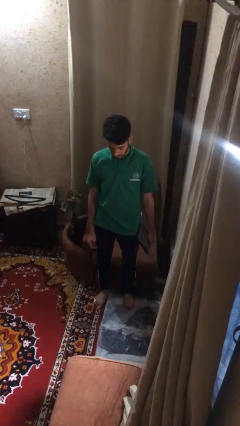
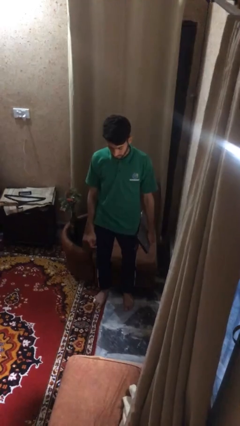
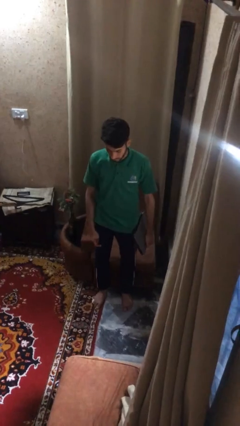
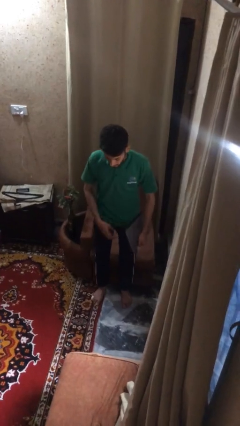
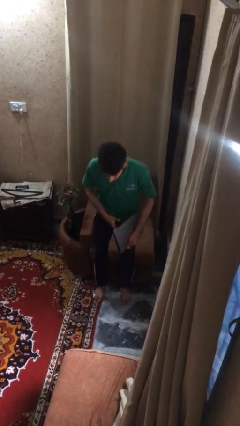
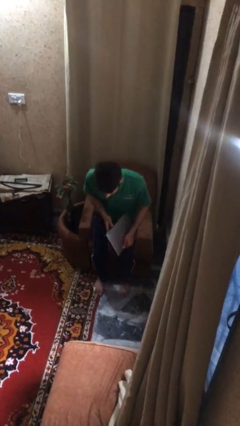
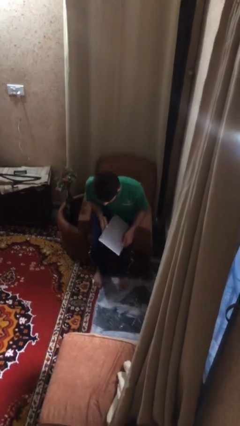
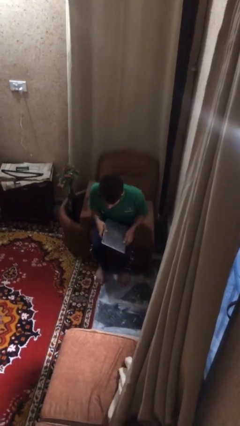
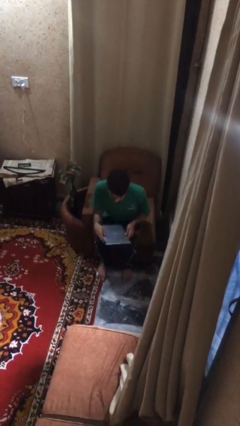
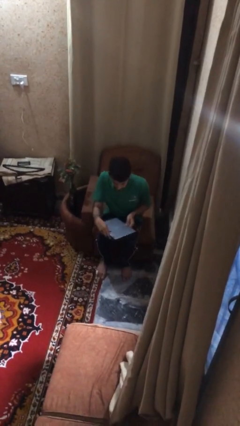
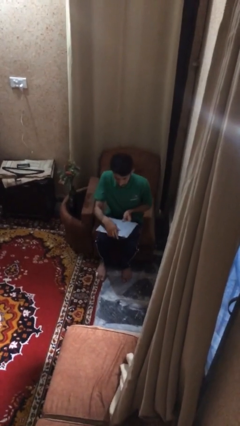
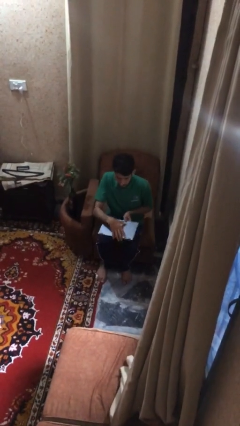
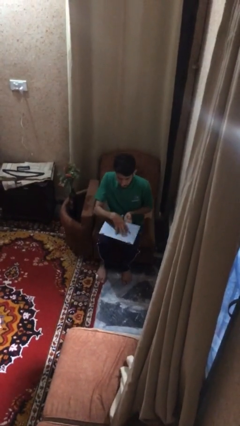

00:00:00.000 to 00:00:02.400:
person sits down

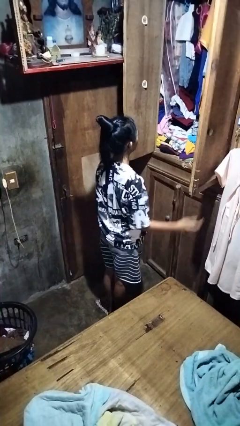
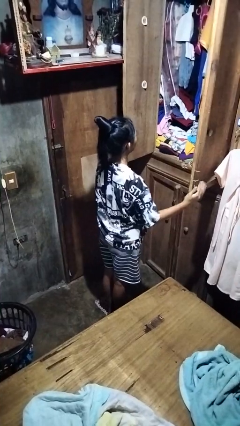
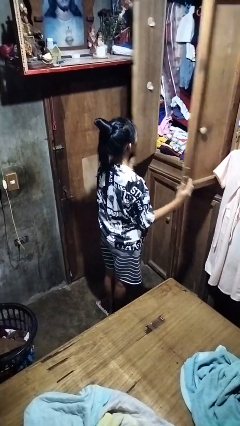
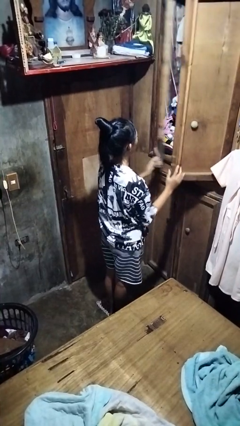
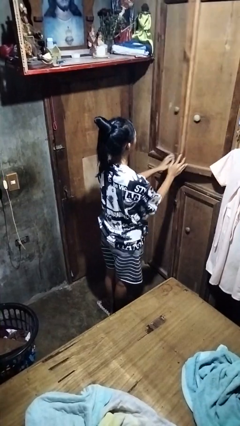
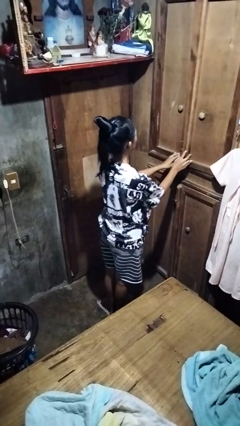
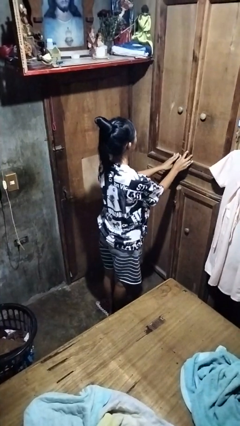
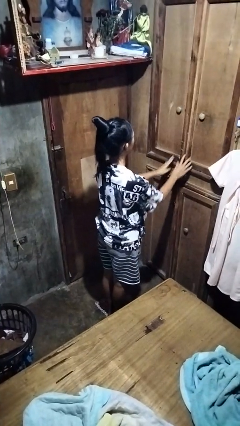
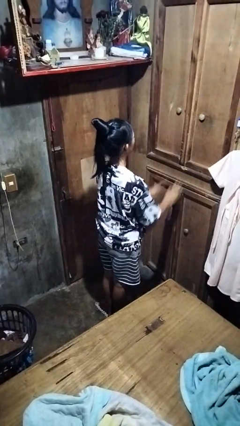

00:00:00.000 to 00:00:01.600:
person closes closet door

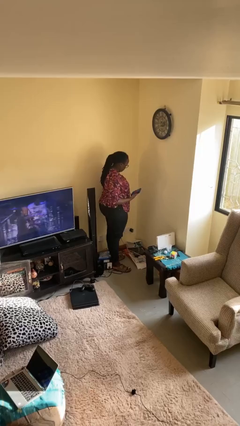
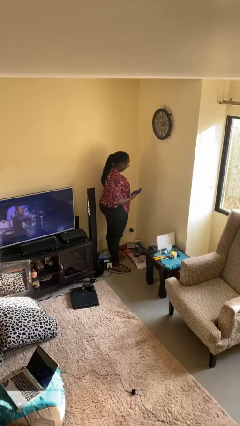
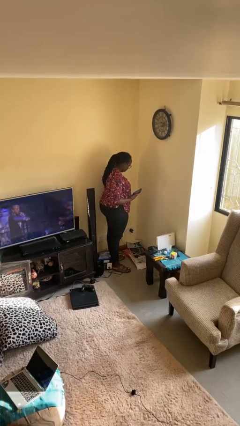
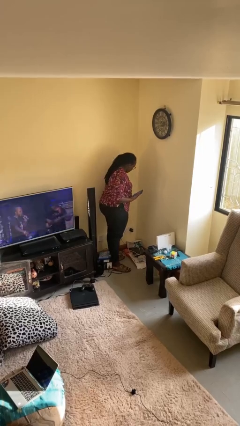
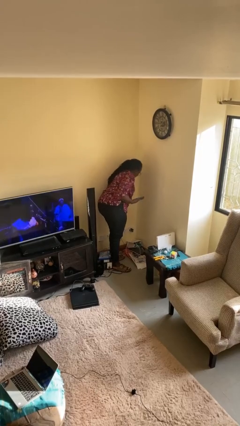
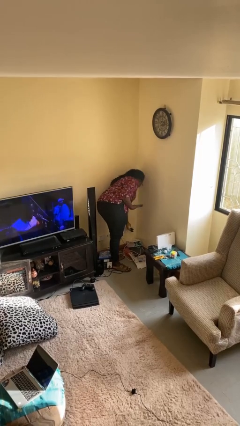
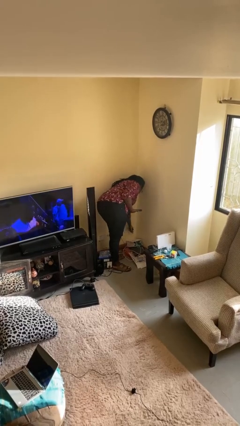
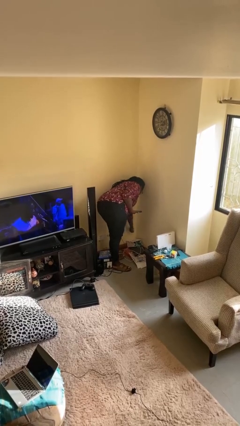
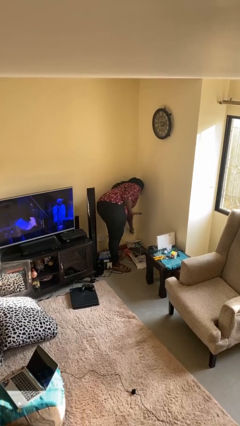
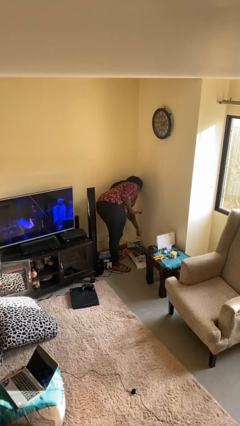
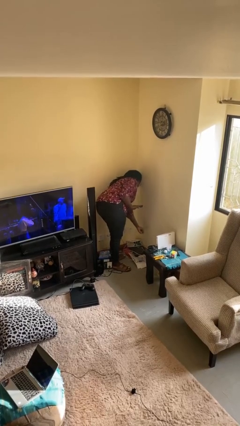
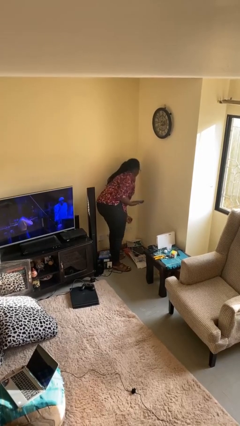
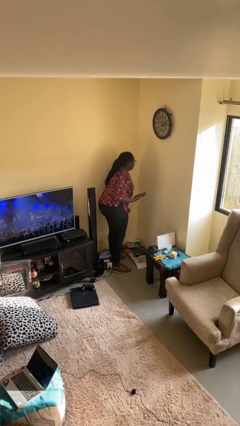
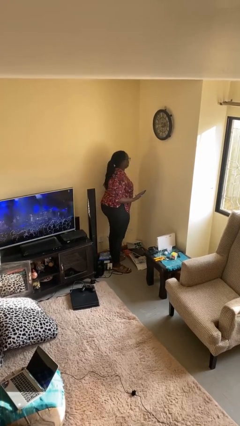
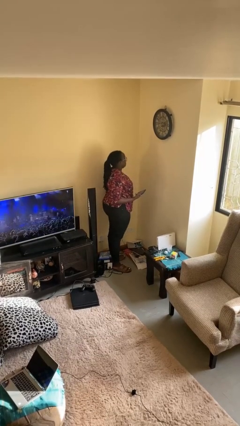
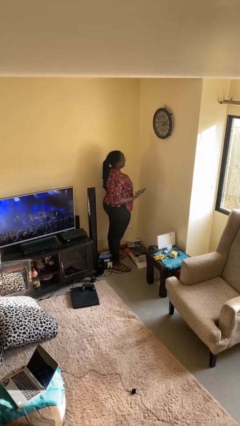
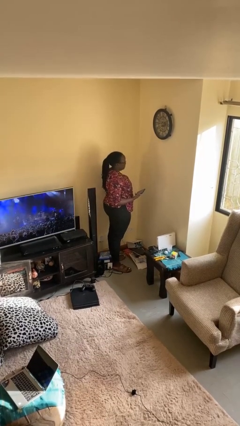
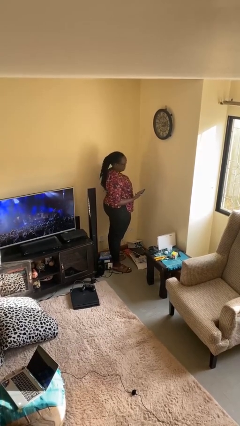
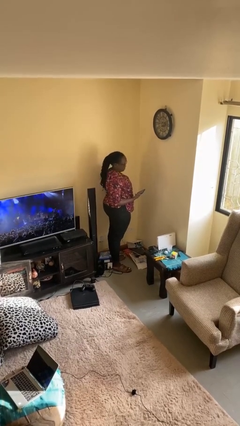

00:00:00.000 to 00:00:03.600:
person unplugs from electrical socket

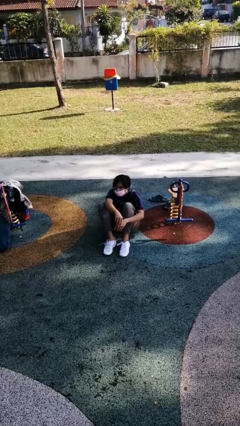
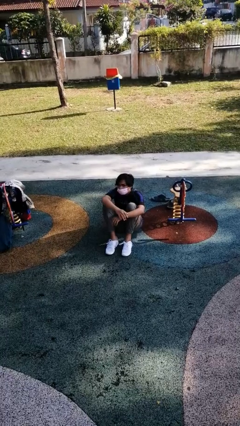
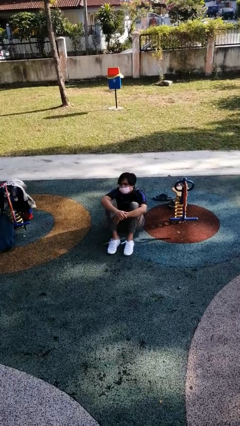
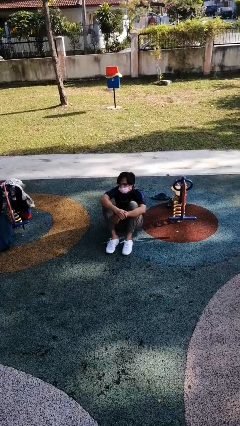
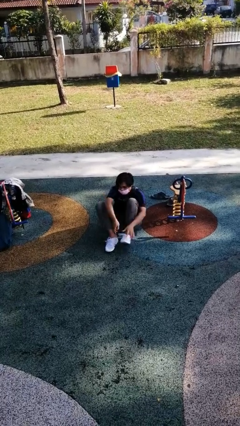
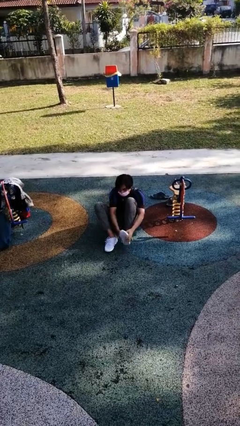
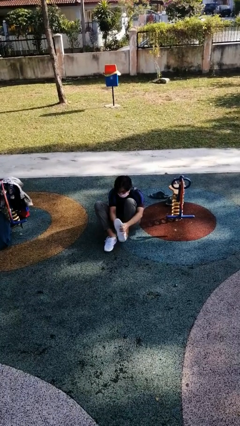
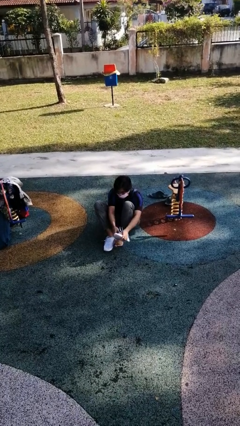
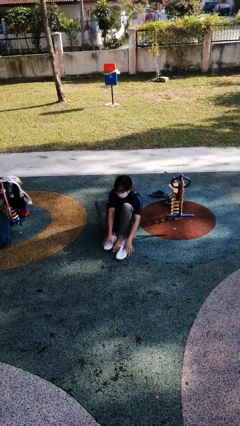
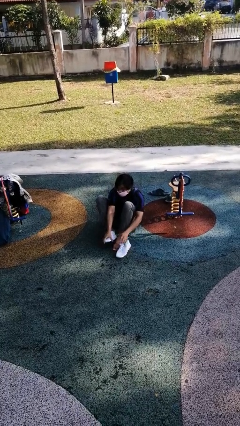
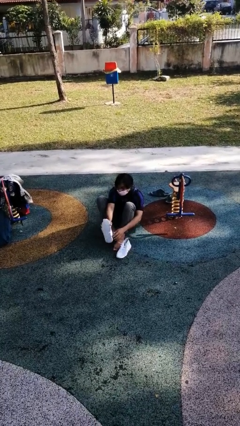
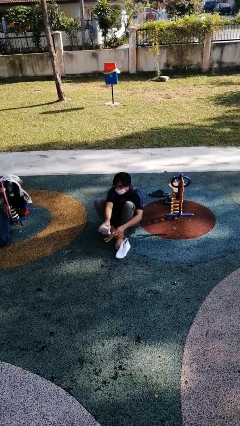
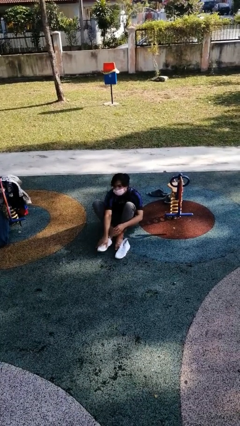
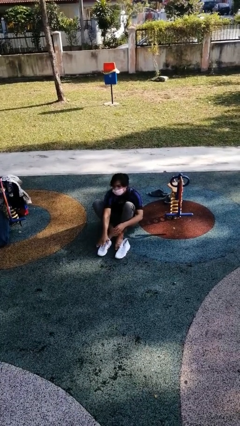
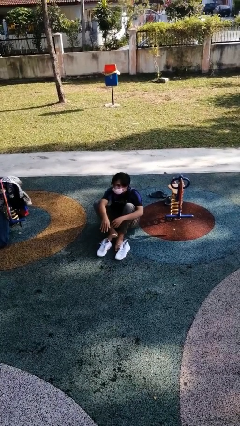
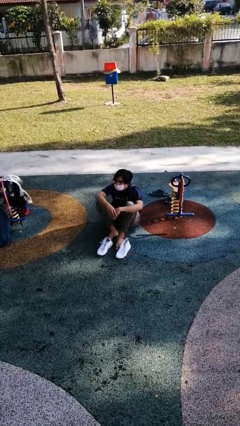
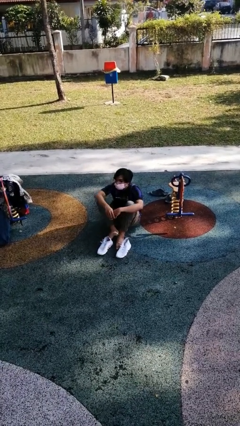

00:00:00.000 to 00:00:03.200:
person takes off shoes

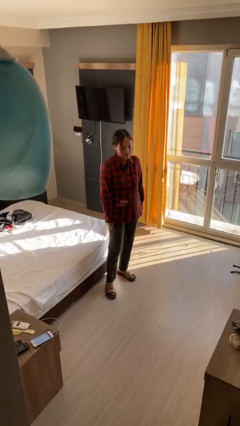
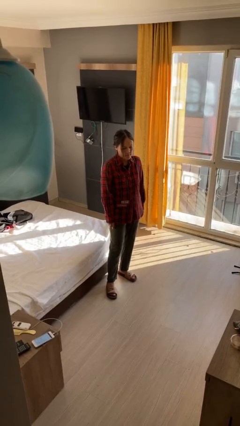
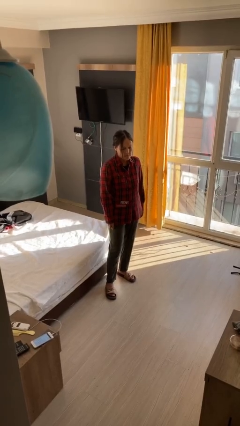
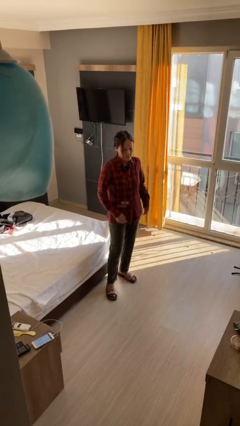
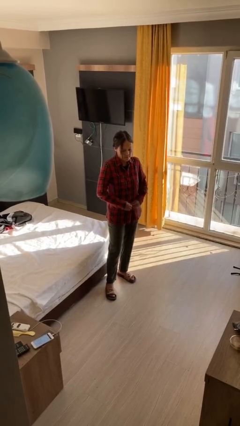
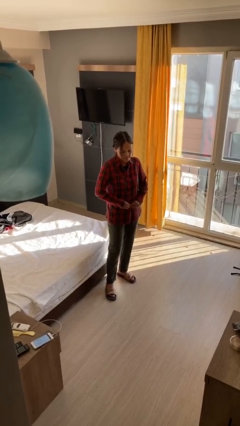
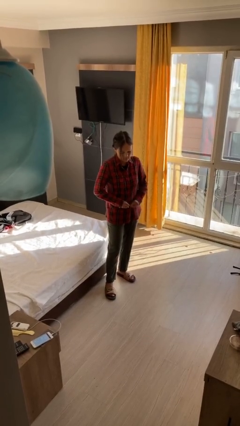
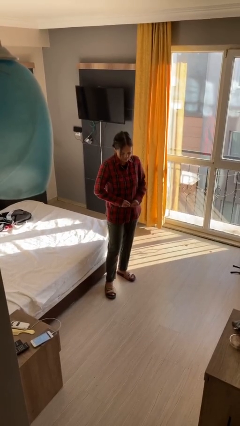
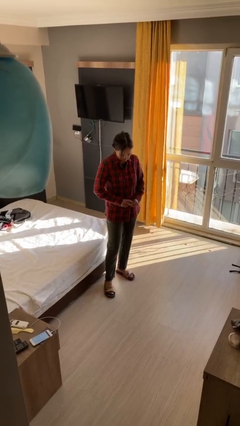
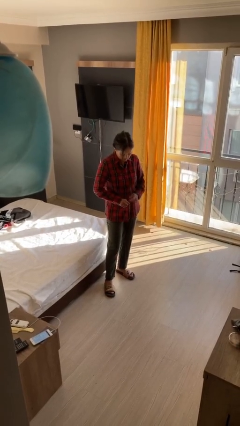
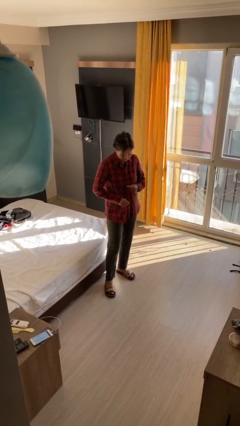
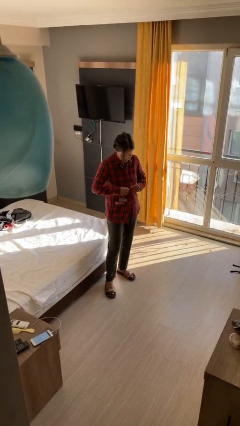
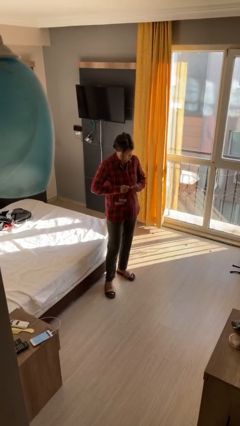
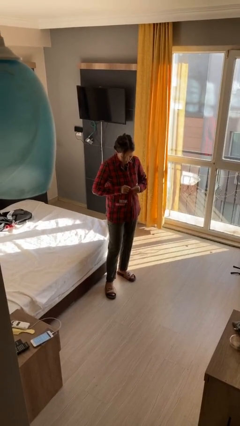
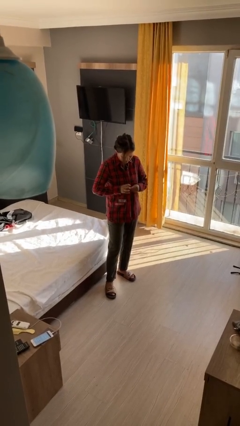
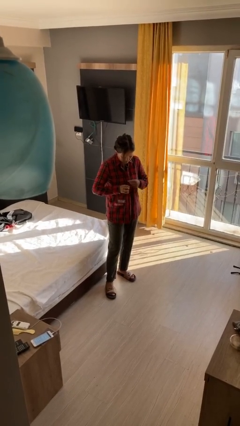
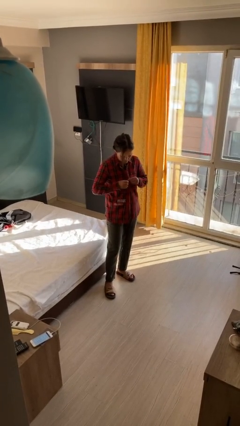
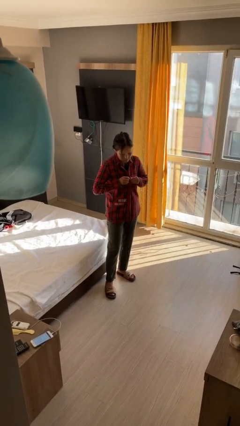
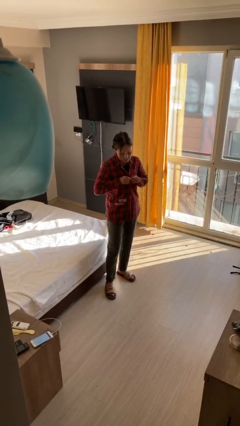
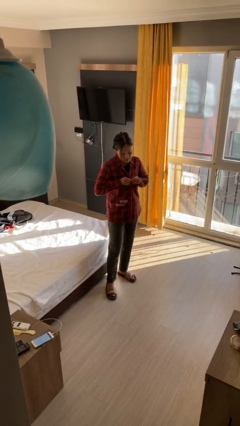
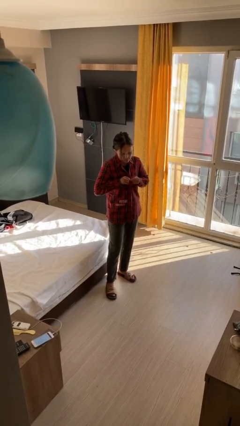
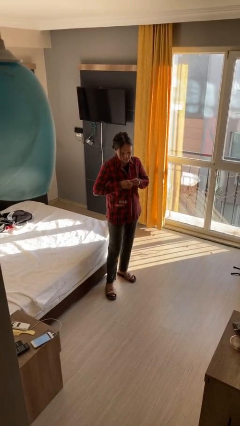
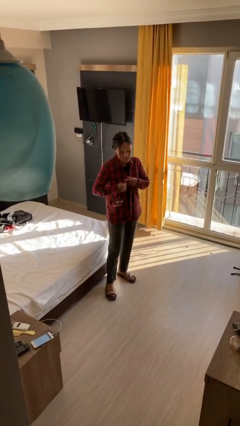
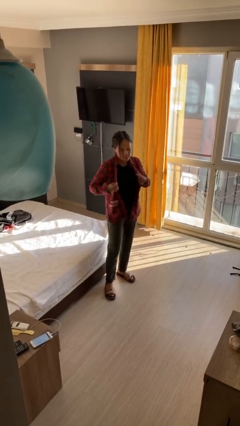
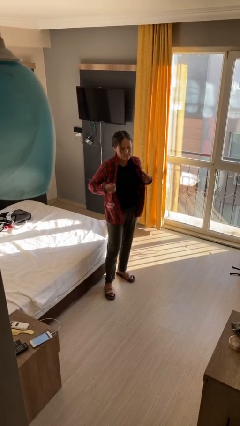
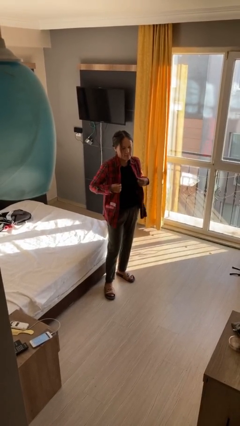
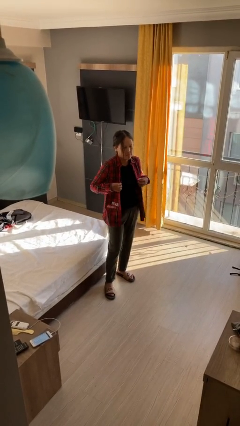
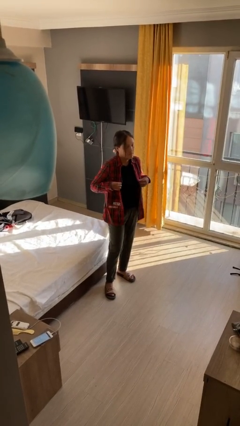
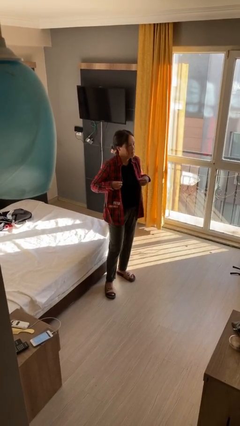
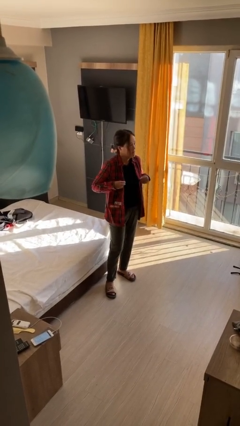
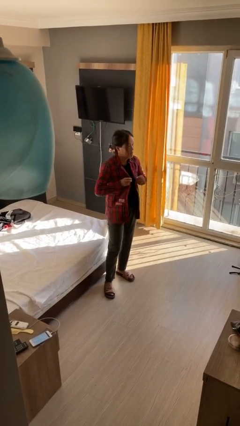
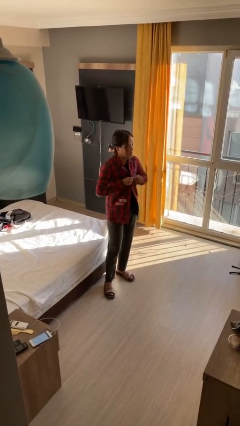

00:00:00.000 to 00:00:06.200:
person unbuttons shirt

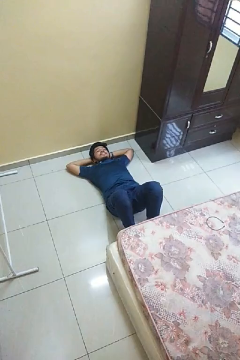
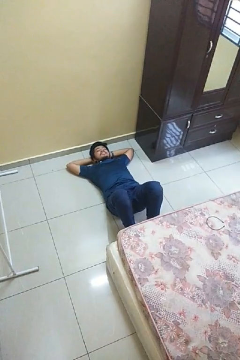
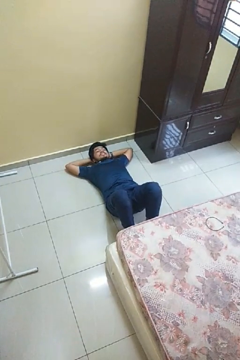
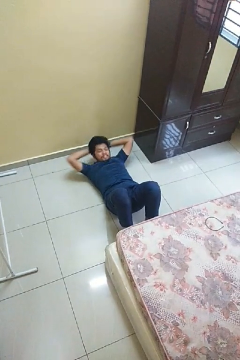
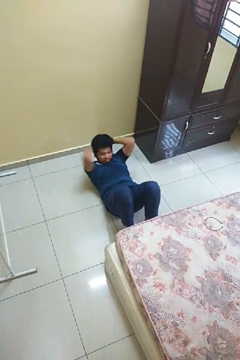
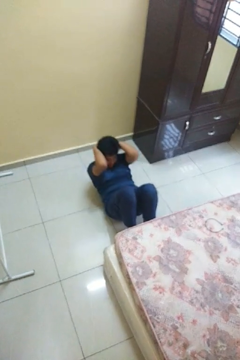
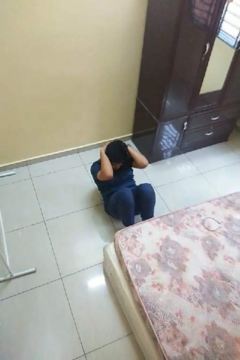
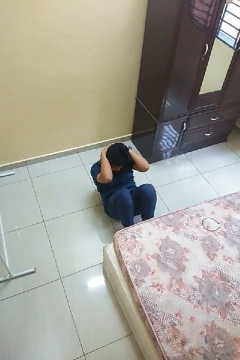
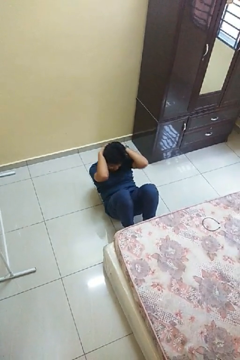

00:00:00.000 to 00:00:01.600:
person exercises with situp
